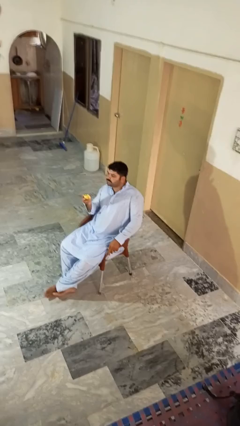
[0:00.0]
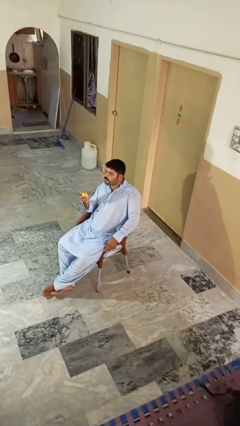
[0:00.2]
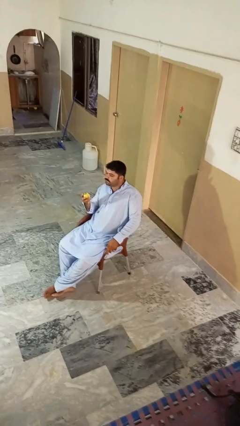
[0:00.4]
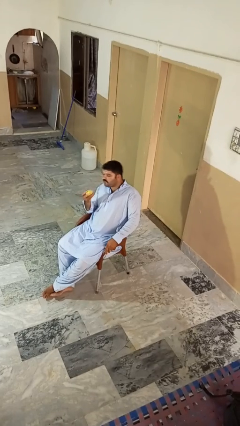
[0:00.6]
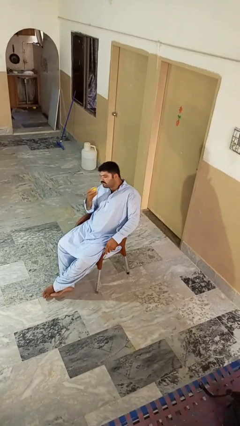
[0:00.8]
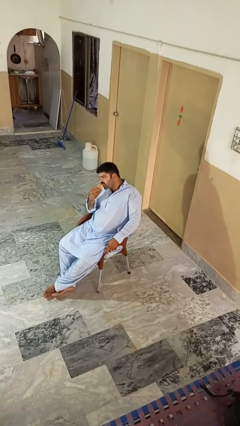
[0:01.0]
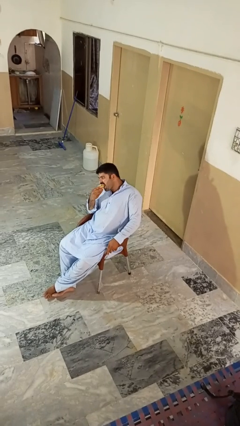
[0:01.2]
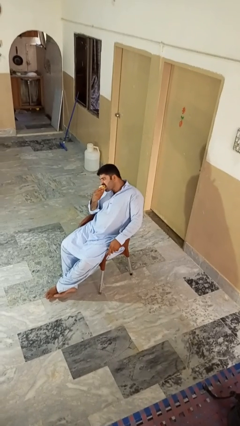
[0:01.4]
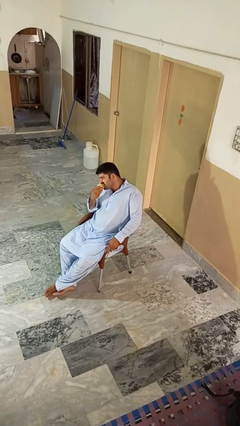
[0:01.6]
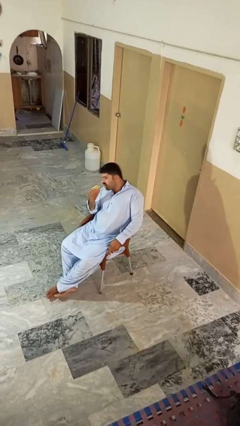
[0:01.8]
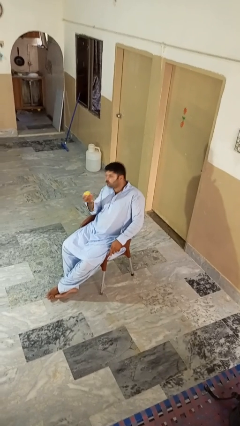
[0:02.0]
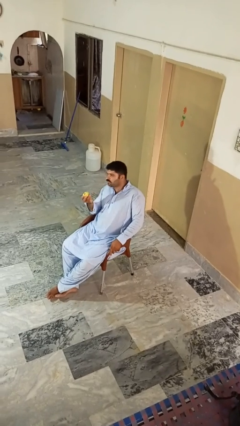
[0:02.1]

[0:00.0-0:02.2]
person eats apple

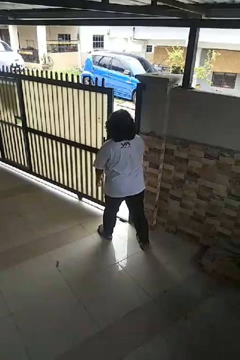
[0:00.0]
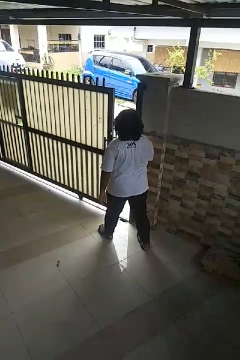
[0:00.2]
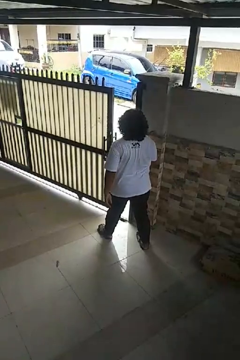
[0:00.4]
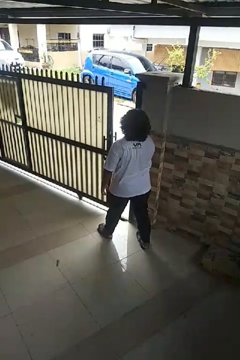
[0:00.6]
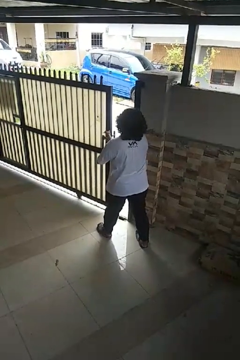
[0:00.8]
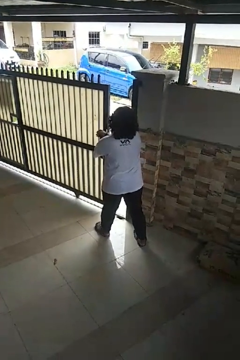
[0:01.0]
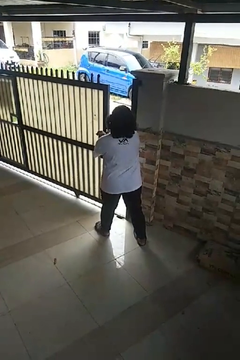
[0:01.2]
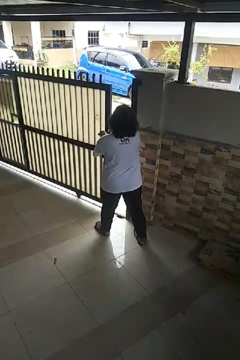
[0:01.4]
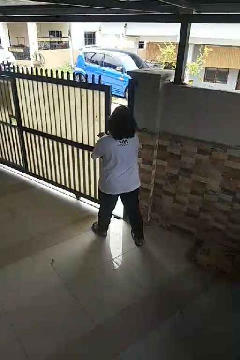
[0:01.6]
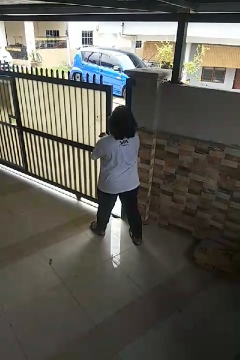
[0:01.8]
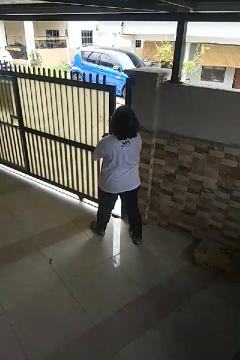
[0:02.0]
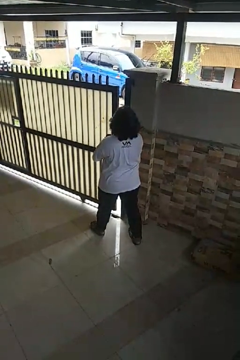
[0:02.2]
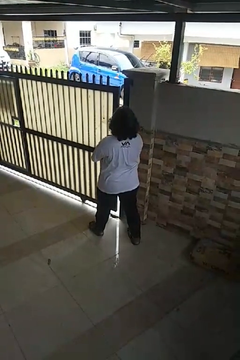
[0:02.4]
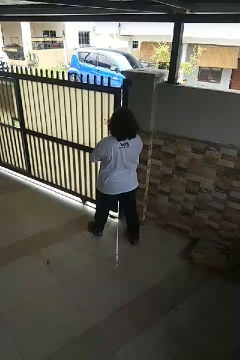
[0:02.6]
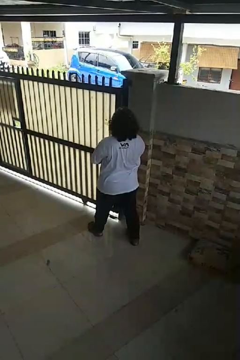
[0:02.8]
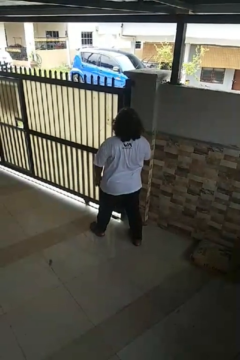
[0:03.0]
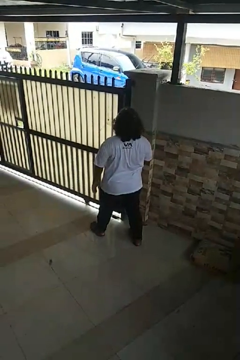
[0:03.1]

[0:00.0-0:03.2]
person closes sliding door

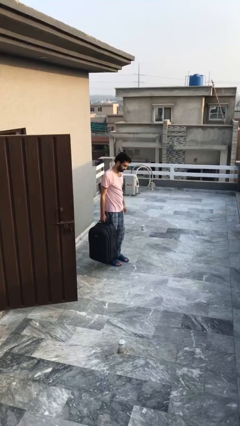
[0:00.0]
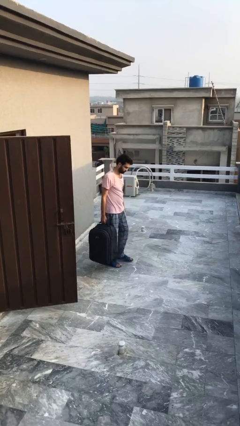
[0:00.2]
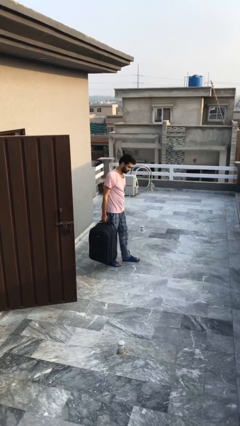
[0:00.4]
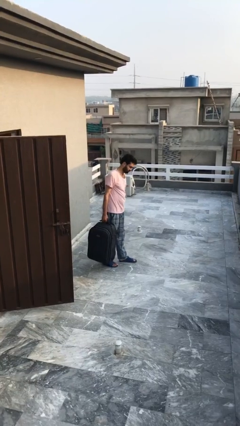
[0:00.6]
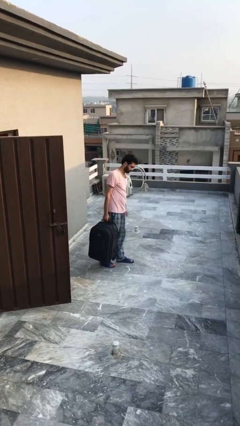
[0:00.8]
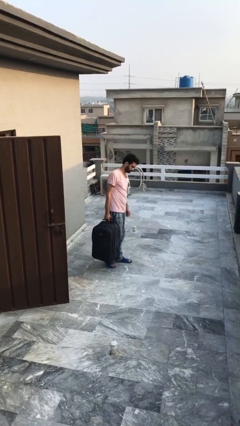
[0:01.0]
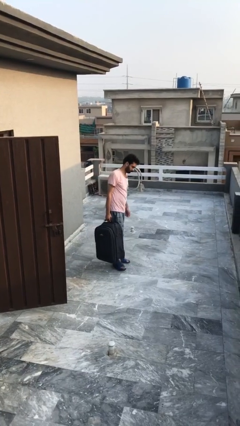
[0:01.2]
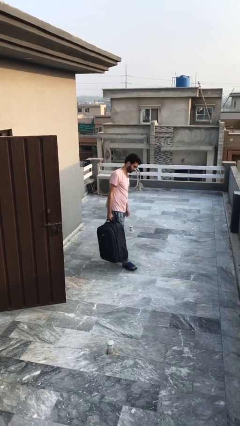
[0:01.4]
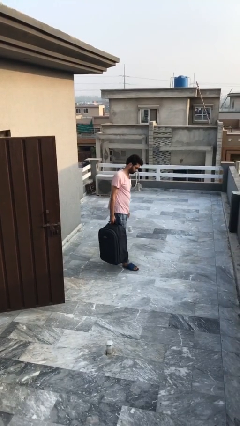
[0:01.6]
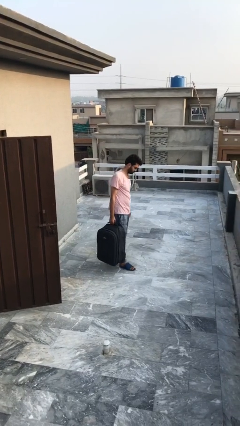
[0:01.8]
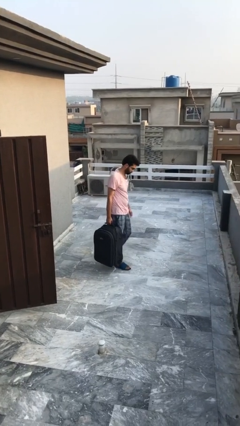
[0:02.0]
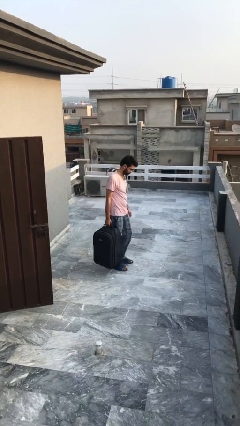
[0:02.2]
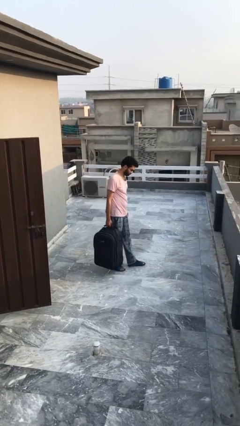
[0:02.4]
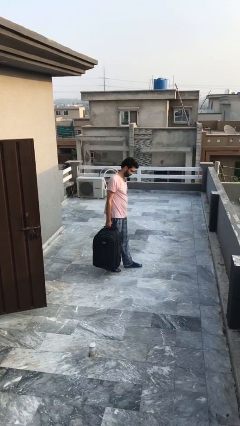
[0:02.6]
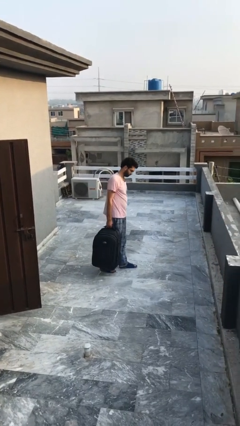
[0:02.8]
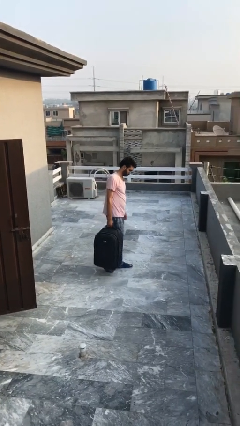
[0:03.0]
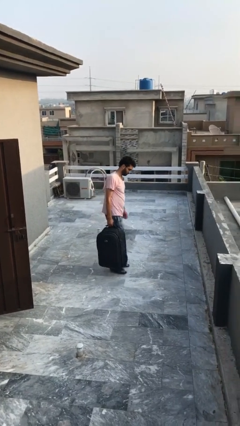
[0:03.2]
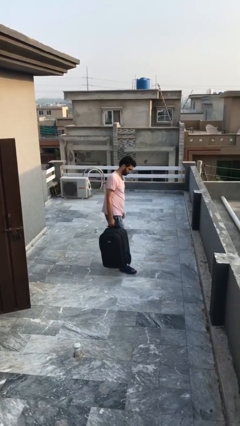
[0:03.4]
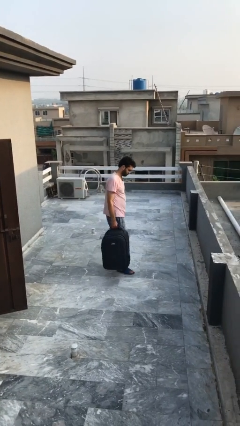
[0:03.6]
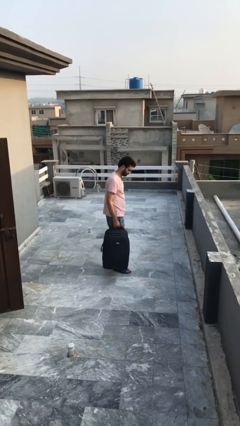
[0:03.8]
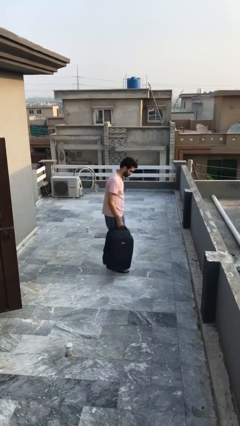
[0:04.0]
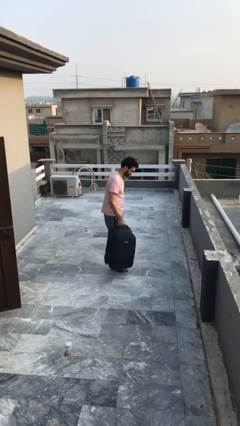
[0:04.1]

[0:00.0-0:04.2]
person carries heavy object

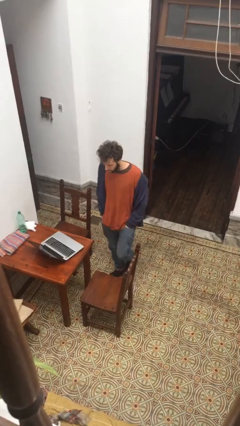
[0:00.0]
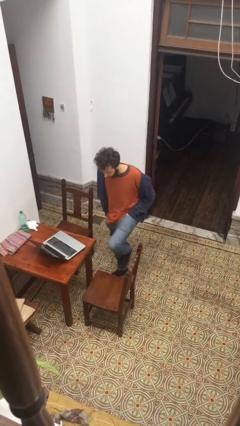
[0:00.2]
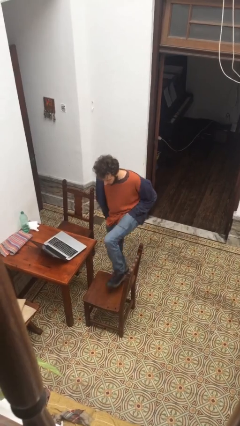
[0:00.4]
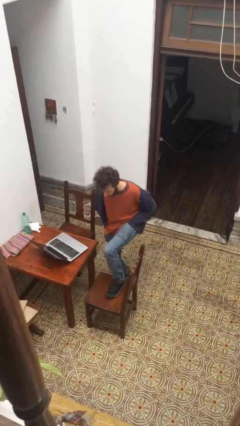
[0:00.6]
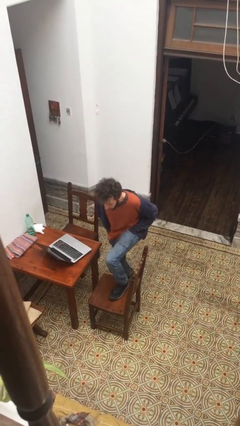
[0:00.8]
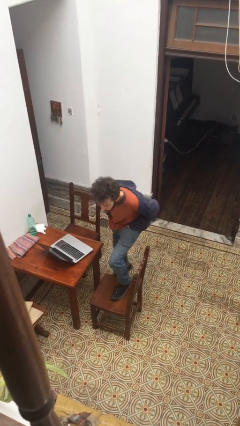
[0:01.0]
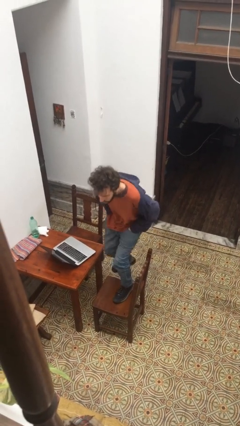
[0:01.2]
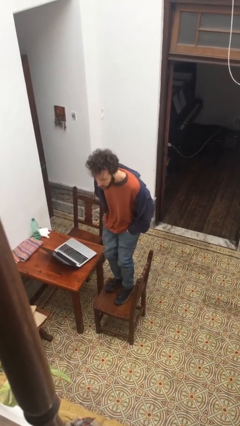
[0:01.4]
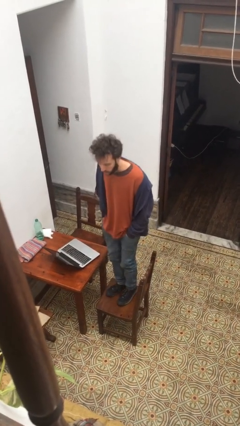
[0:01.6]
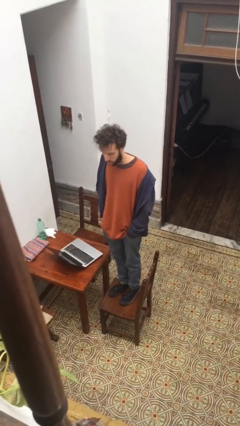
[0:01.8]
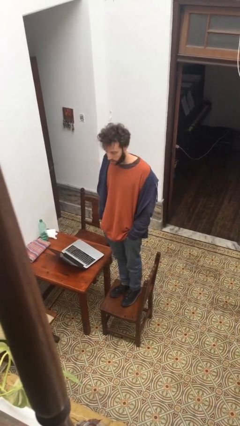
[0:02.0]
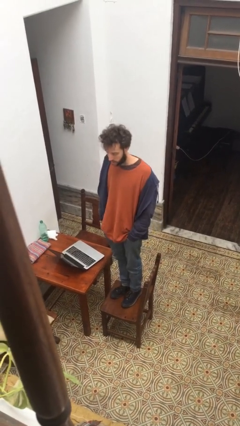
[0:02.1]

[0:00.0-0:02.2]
person climbs on chair

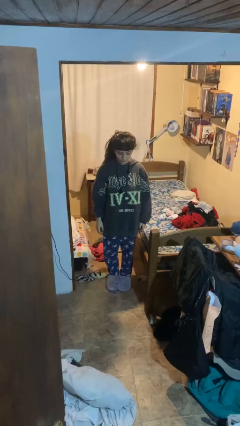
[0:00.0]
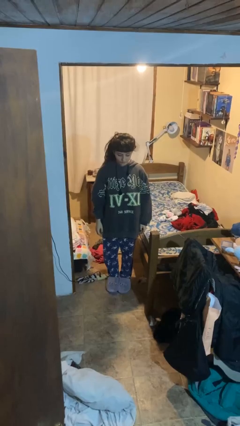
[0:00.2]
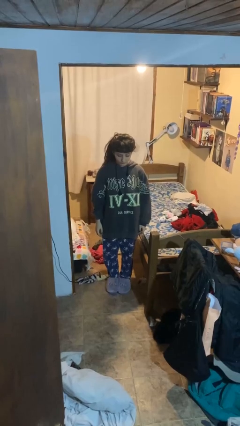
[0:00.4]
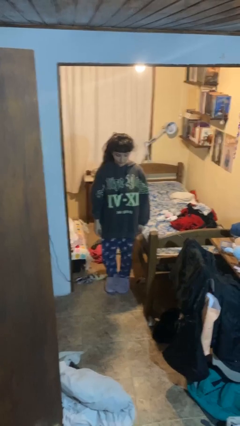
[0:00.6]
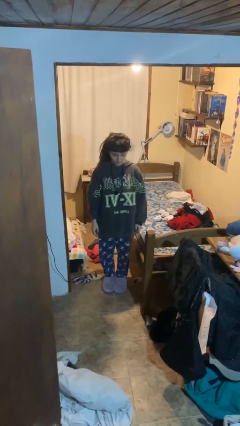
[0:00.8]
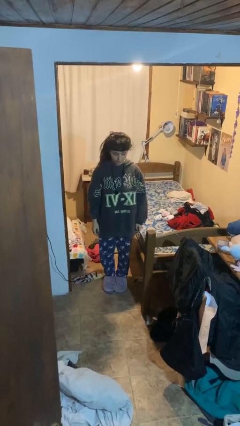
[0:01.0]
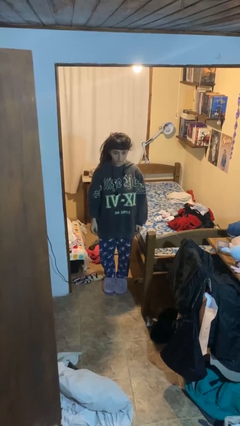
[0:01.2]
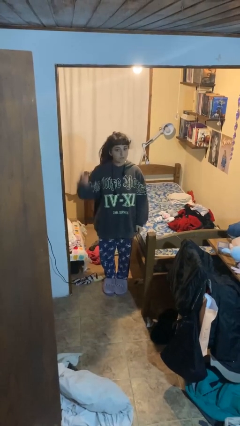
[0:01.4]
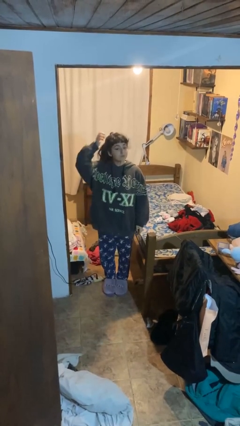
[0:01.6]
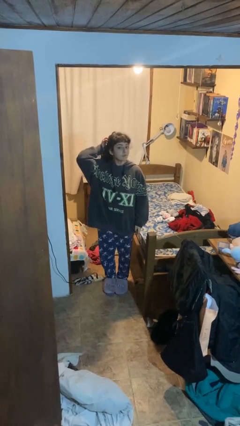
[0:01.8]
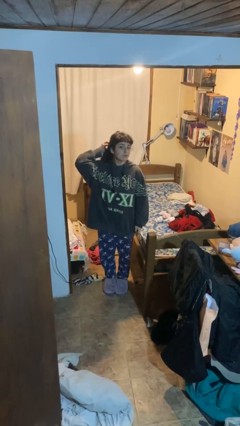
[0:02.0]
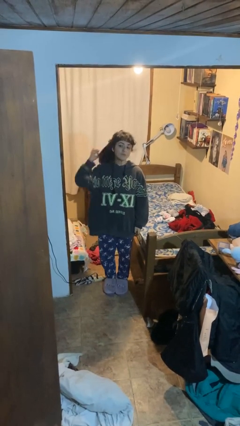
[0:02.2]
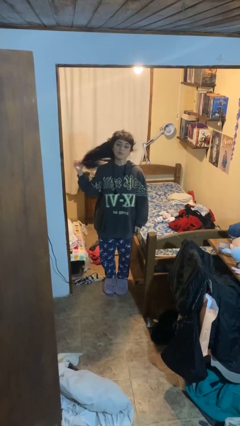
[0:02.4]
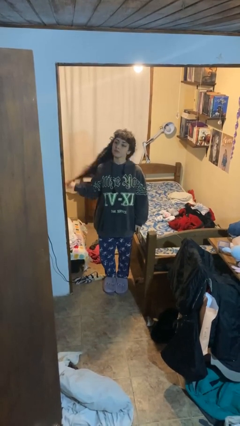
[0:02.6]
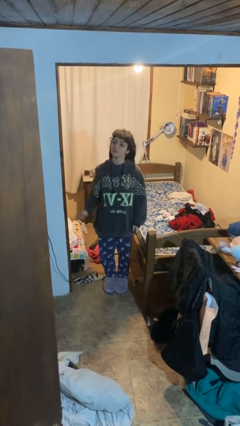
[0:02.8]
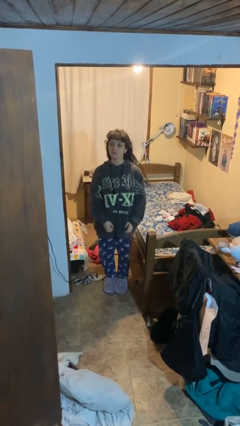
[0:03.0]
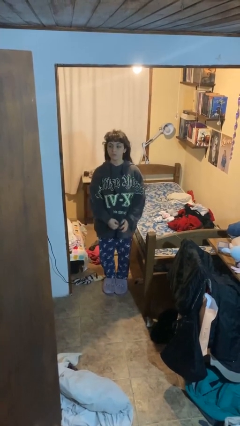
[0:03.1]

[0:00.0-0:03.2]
person takes off hairtie

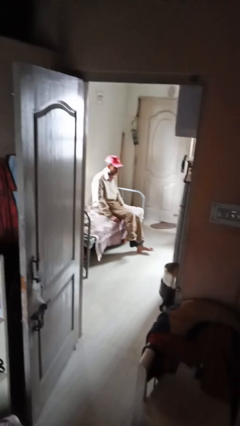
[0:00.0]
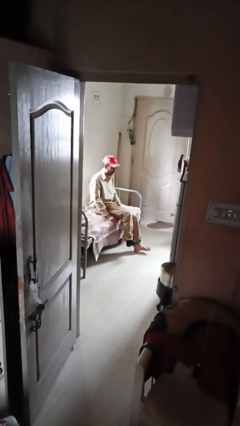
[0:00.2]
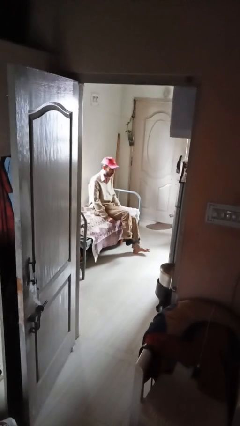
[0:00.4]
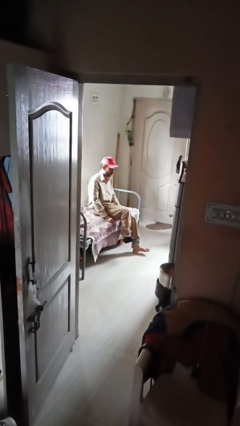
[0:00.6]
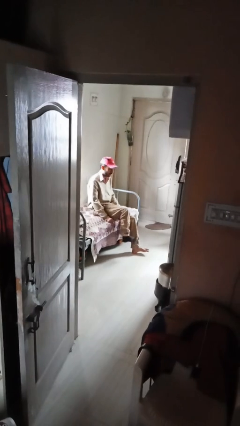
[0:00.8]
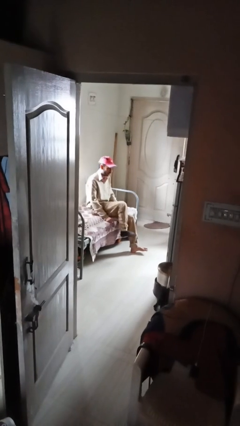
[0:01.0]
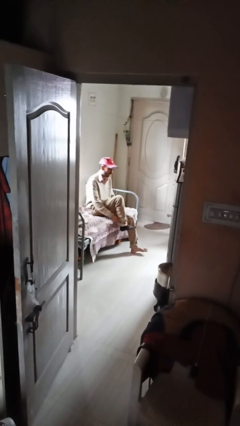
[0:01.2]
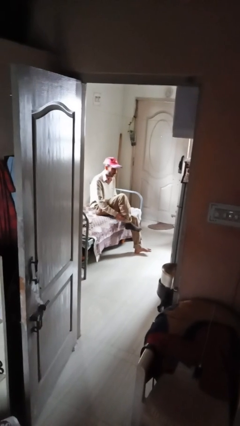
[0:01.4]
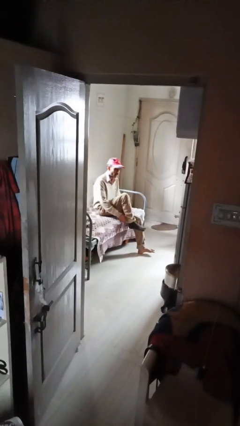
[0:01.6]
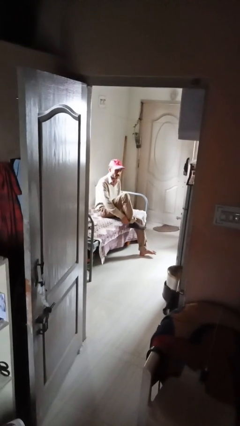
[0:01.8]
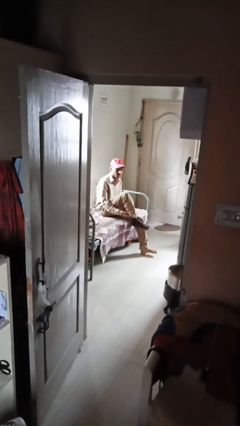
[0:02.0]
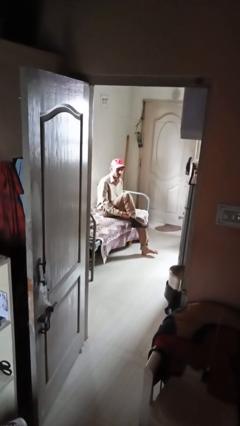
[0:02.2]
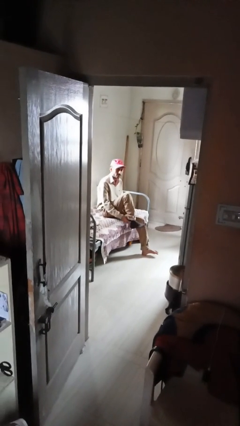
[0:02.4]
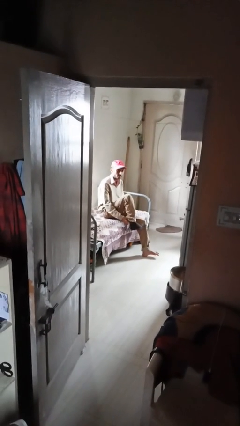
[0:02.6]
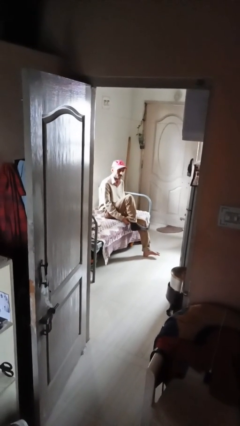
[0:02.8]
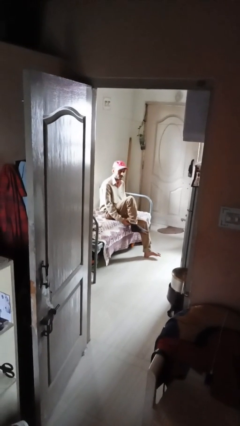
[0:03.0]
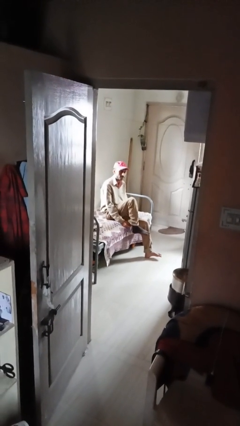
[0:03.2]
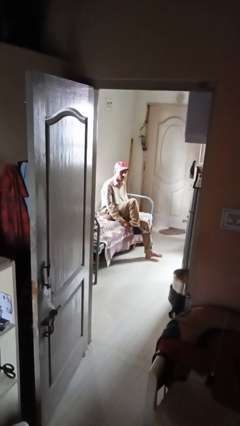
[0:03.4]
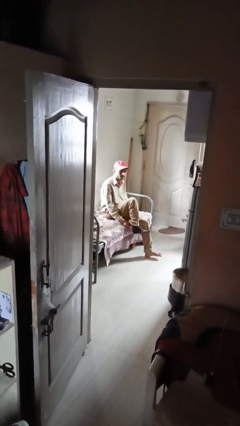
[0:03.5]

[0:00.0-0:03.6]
person puts on socks
